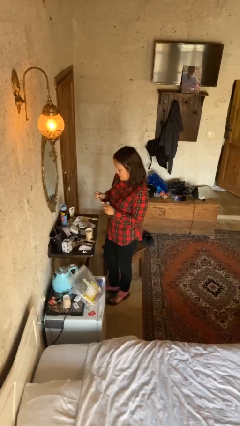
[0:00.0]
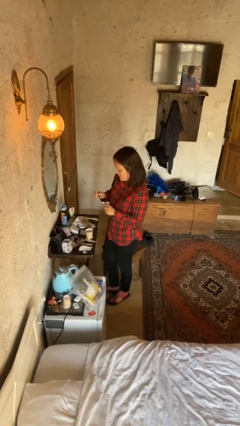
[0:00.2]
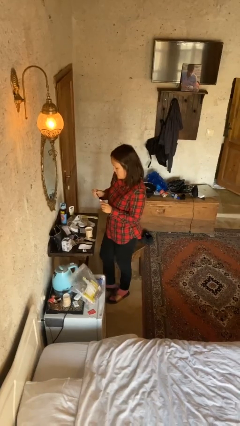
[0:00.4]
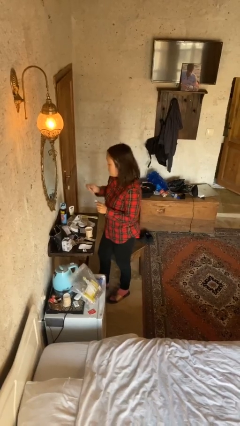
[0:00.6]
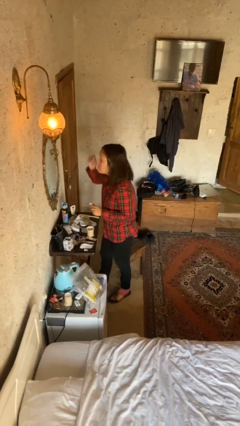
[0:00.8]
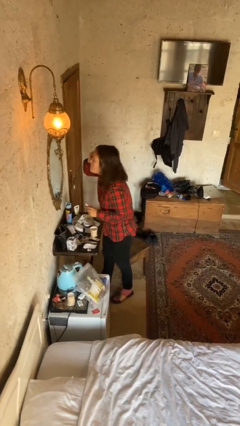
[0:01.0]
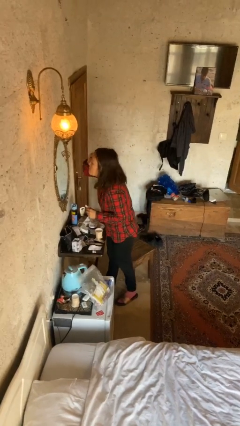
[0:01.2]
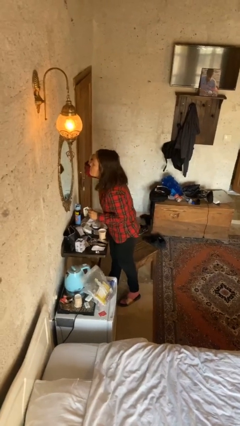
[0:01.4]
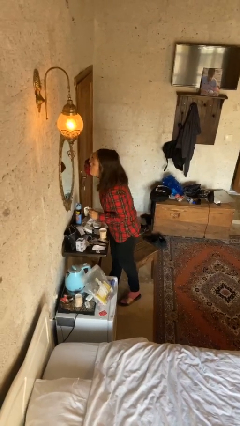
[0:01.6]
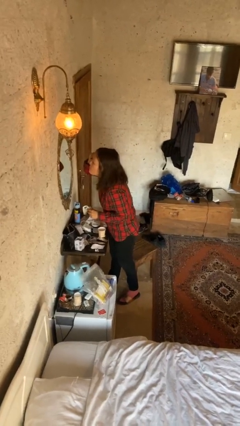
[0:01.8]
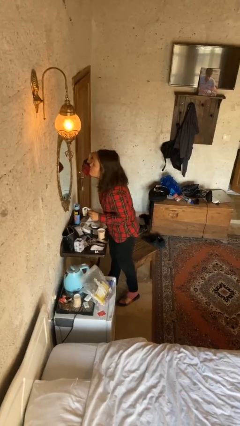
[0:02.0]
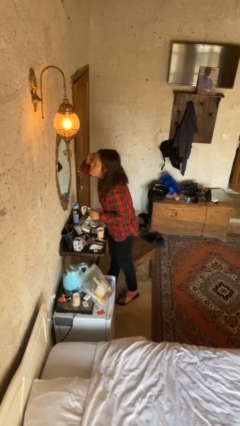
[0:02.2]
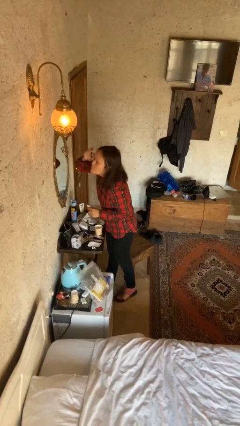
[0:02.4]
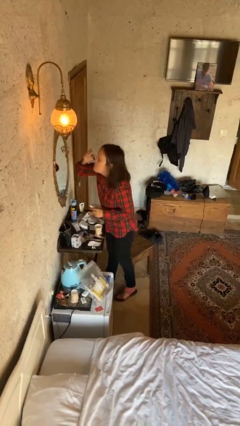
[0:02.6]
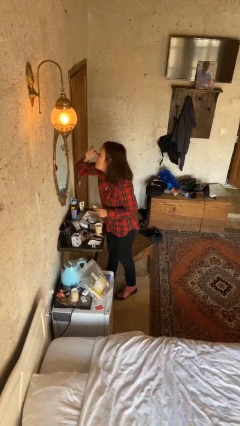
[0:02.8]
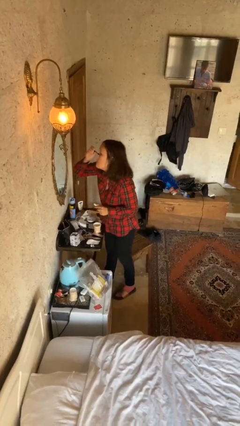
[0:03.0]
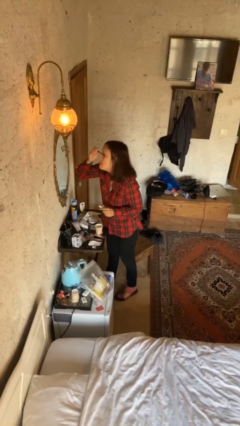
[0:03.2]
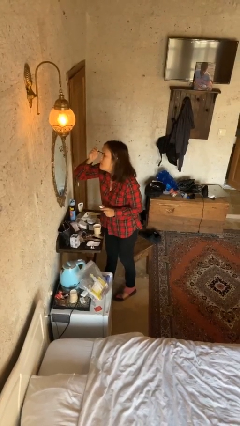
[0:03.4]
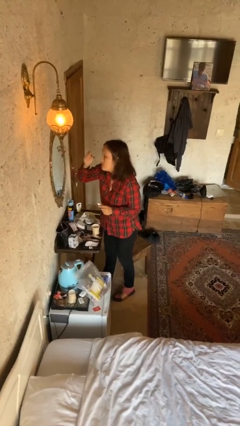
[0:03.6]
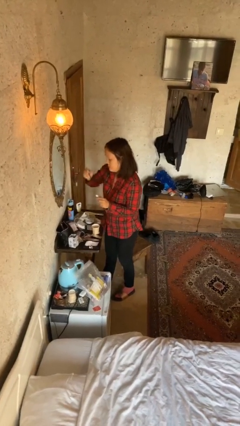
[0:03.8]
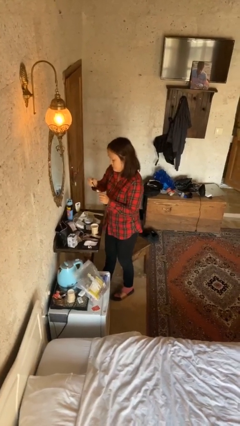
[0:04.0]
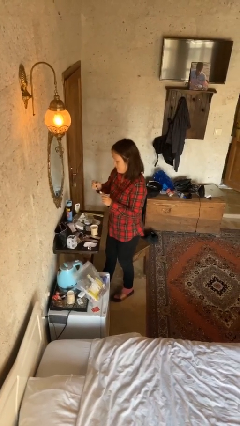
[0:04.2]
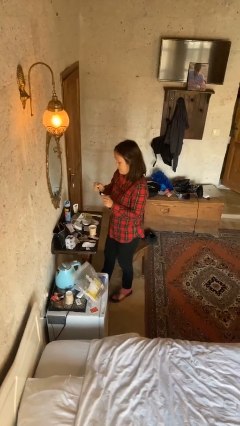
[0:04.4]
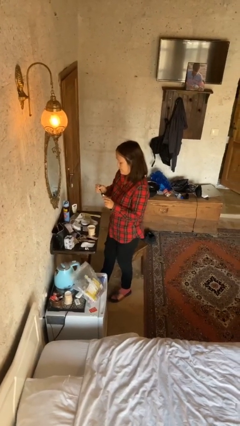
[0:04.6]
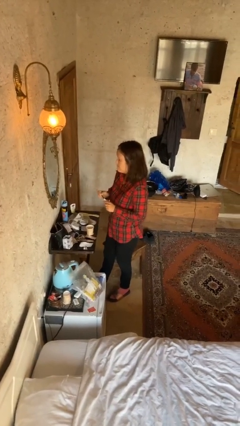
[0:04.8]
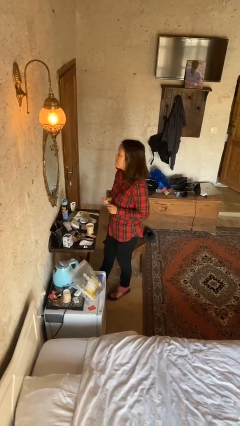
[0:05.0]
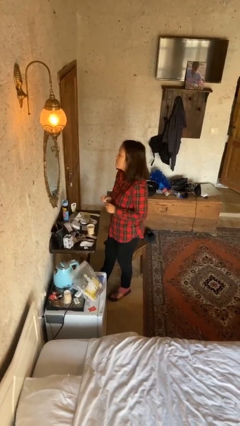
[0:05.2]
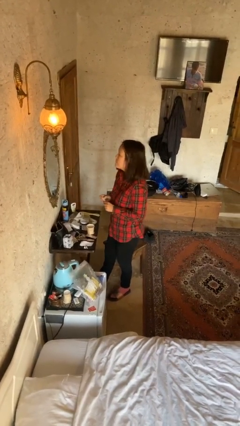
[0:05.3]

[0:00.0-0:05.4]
person applies eye makeup

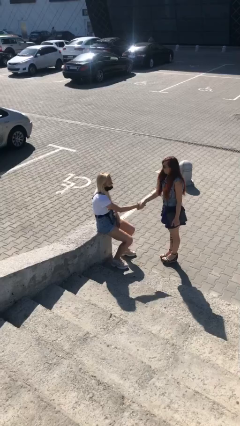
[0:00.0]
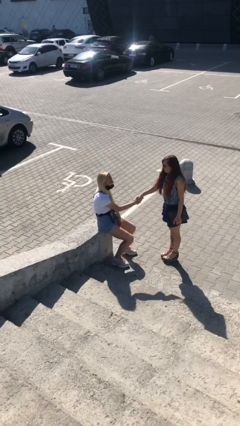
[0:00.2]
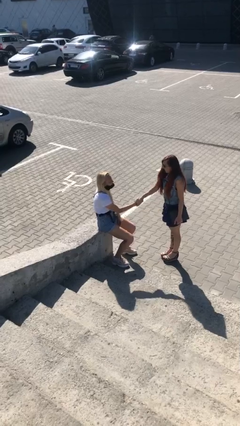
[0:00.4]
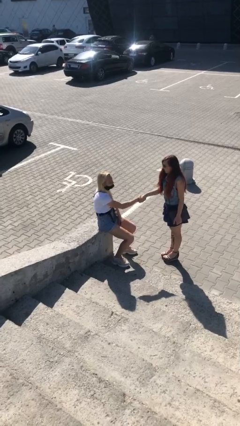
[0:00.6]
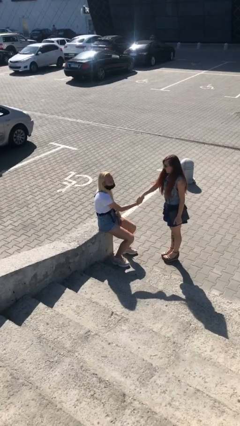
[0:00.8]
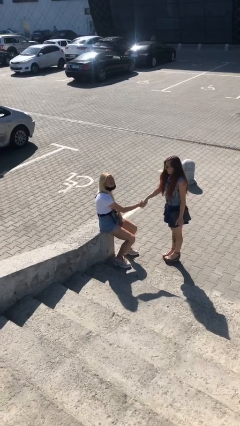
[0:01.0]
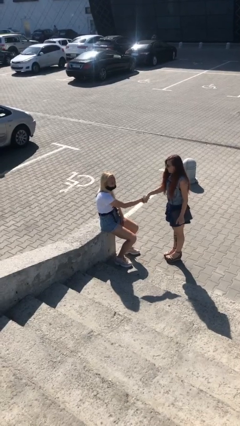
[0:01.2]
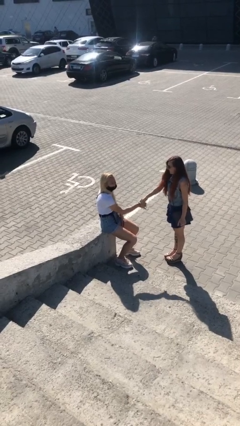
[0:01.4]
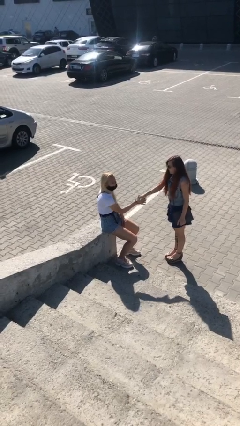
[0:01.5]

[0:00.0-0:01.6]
person shakes hand

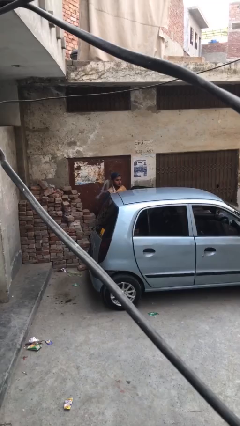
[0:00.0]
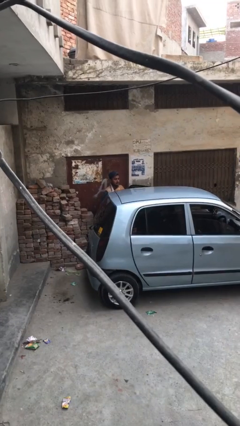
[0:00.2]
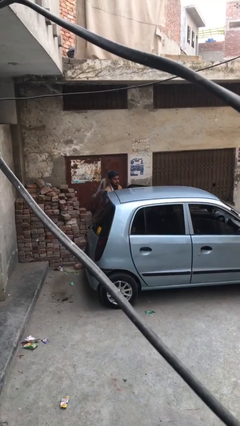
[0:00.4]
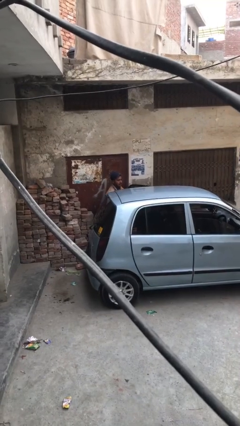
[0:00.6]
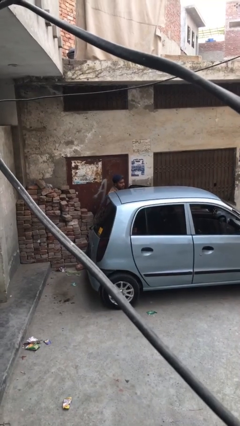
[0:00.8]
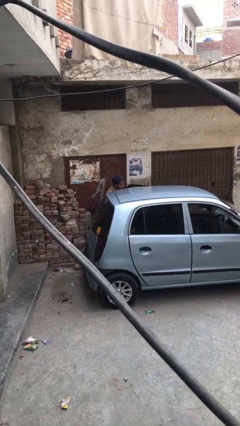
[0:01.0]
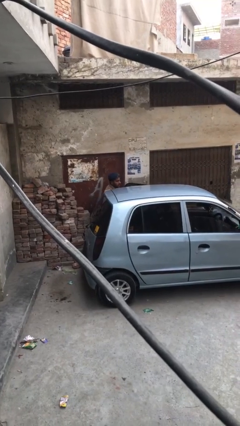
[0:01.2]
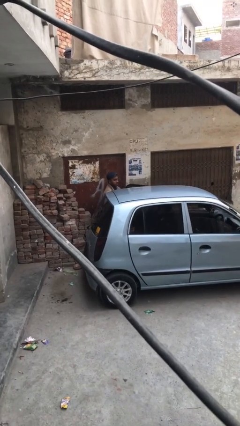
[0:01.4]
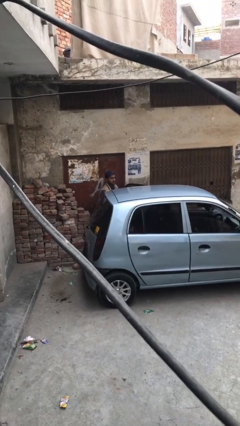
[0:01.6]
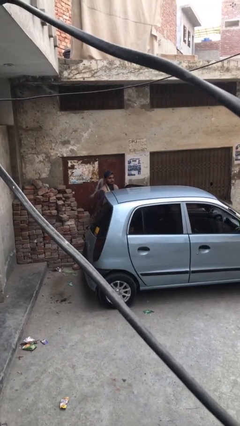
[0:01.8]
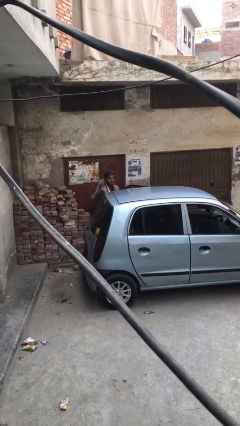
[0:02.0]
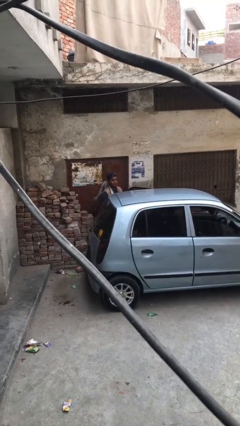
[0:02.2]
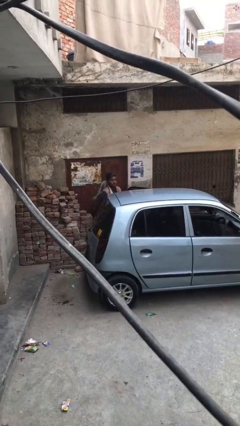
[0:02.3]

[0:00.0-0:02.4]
person loads car

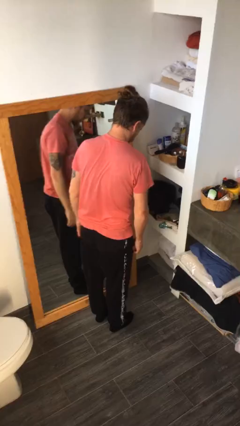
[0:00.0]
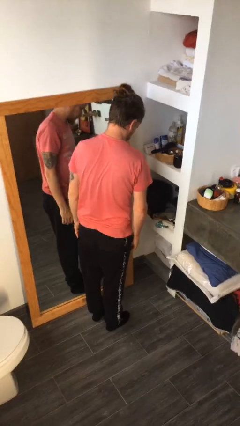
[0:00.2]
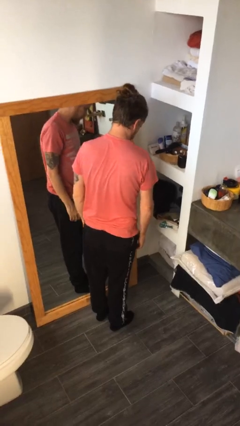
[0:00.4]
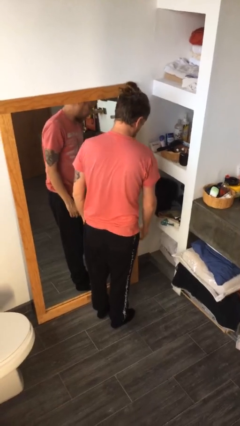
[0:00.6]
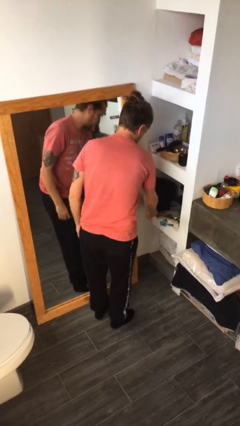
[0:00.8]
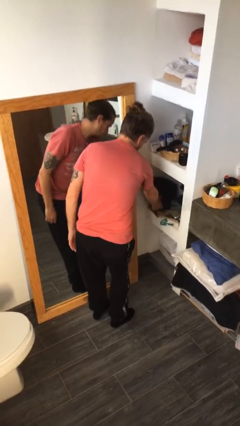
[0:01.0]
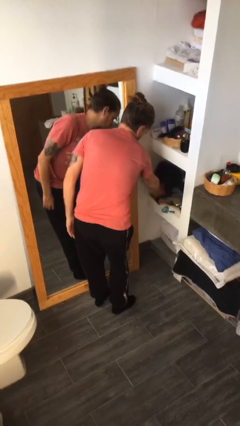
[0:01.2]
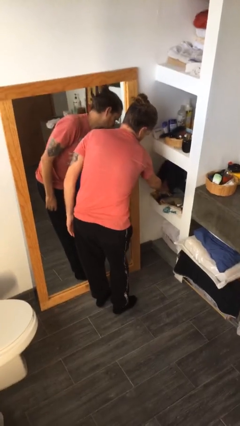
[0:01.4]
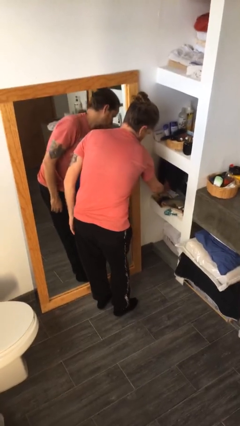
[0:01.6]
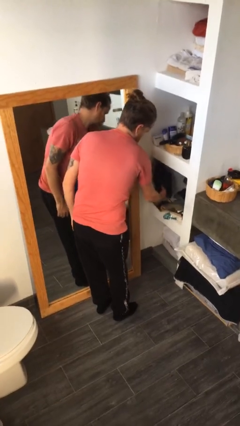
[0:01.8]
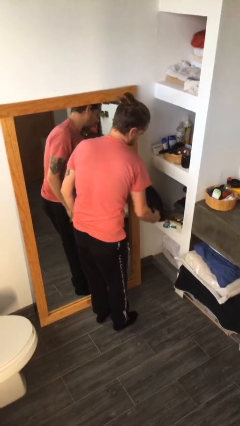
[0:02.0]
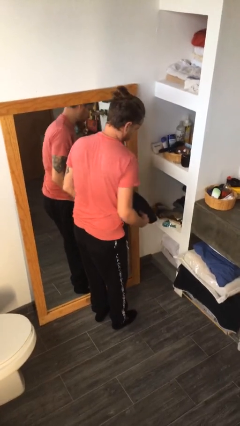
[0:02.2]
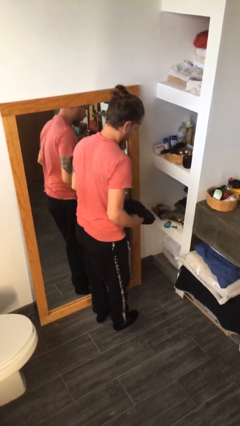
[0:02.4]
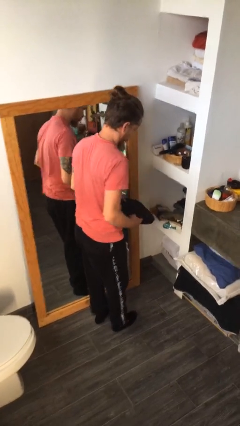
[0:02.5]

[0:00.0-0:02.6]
person picks up object from cabinet

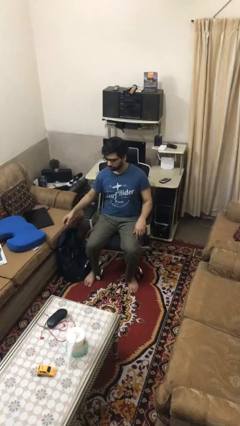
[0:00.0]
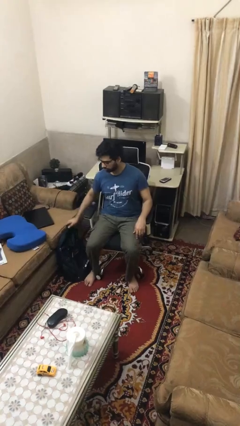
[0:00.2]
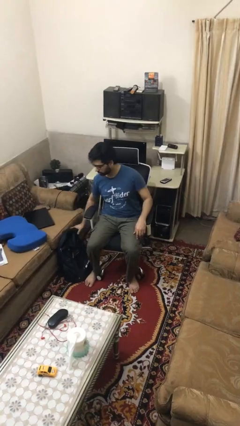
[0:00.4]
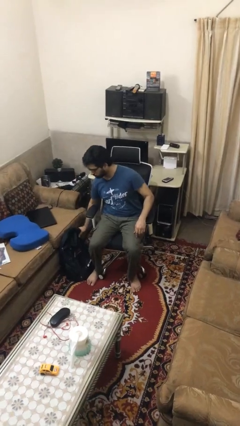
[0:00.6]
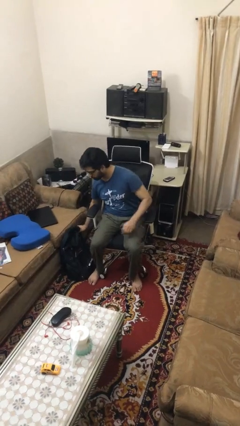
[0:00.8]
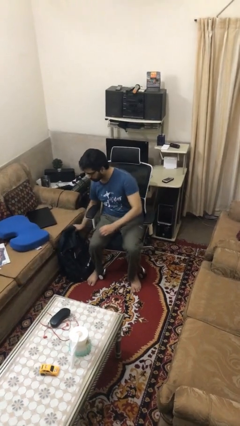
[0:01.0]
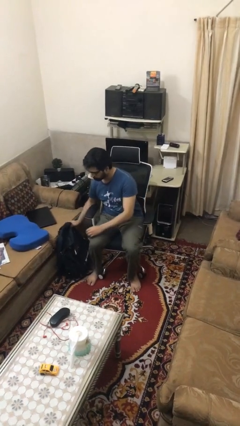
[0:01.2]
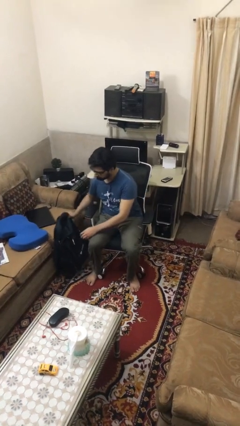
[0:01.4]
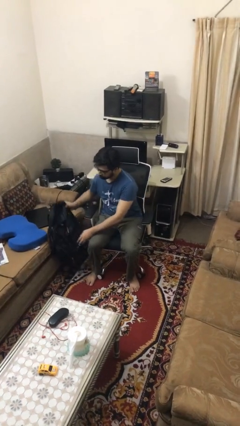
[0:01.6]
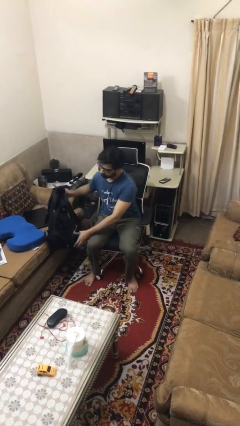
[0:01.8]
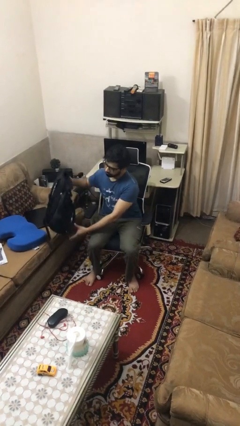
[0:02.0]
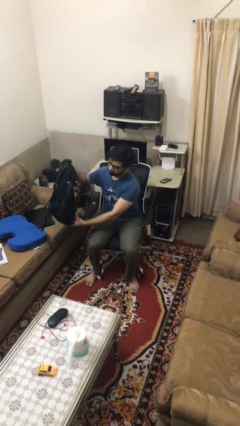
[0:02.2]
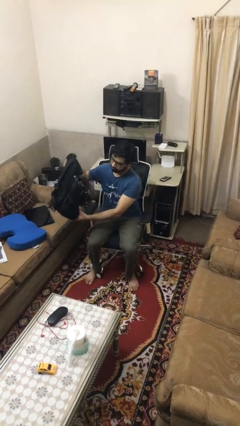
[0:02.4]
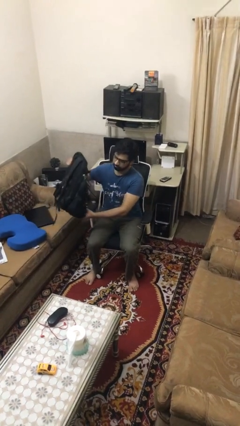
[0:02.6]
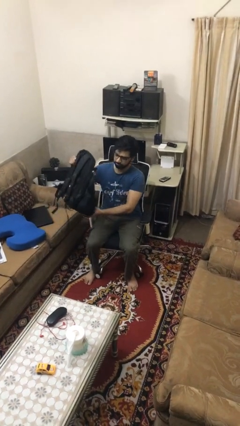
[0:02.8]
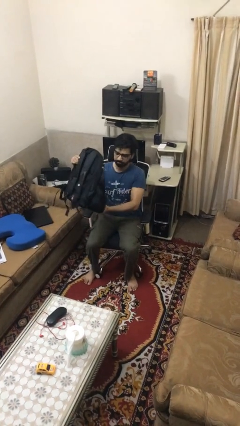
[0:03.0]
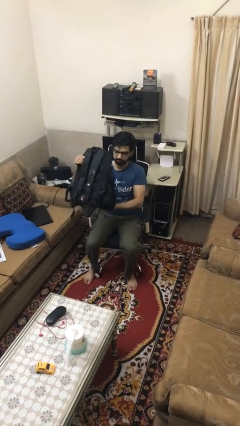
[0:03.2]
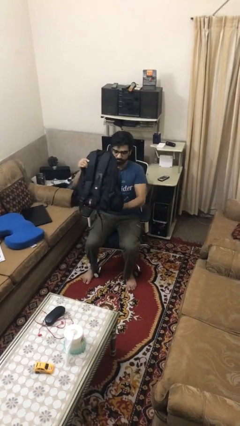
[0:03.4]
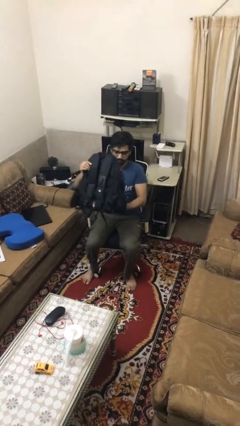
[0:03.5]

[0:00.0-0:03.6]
person picks up object from floor

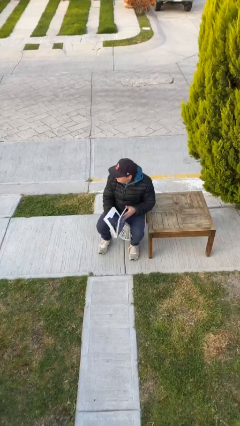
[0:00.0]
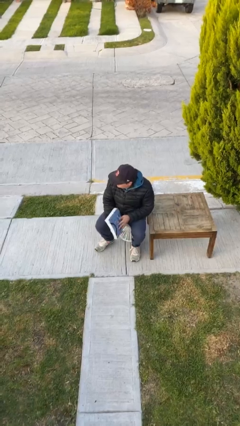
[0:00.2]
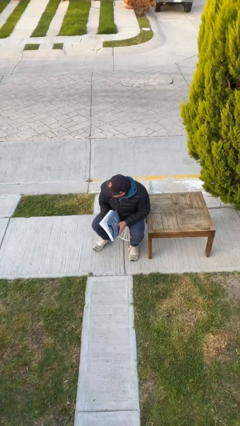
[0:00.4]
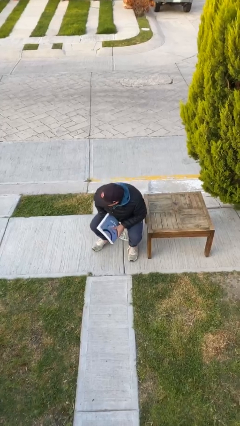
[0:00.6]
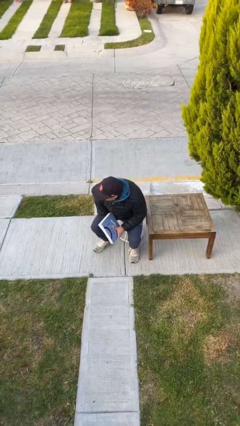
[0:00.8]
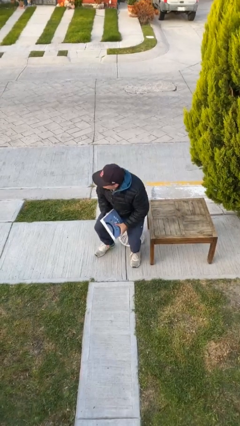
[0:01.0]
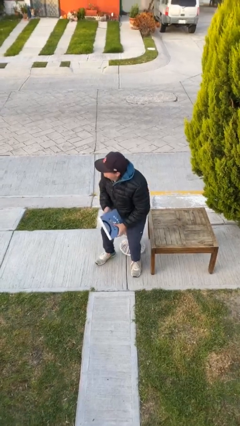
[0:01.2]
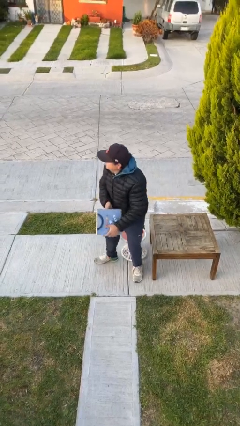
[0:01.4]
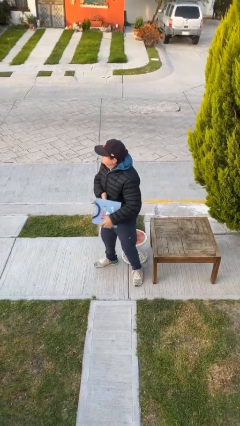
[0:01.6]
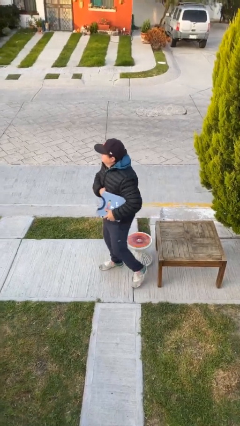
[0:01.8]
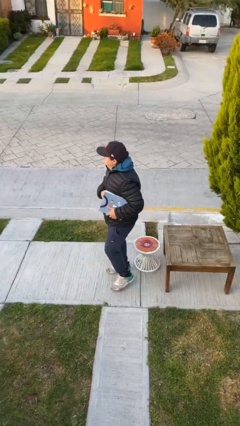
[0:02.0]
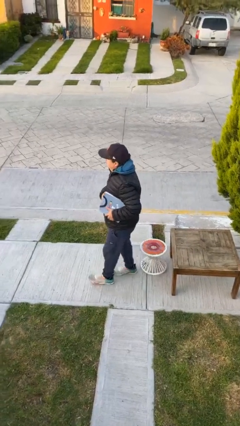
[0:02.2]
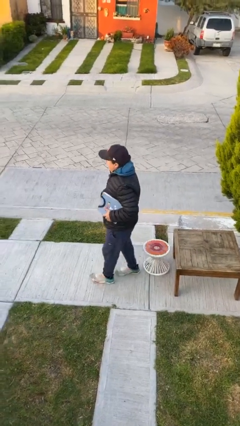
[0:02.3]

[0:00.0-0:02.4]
person stands up
